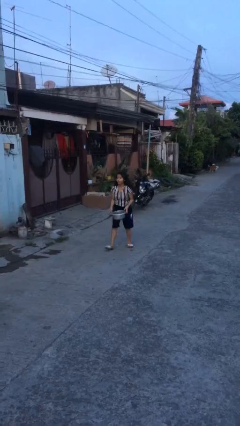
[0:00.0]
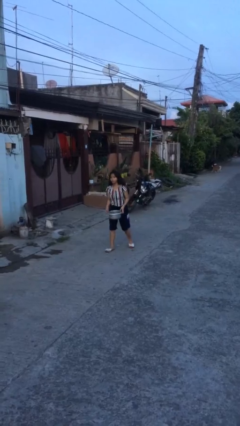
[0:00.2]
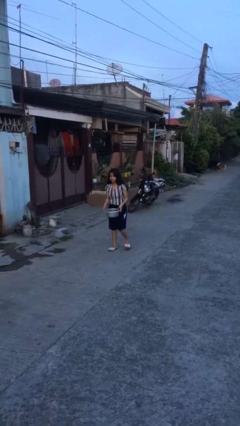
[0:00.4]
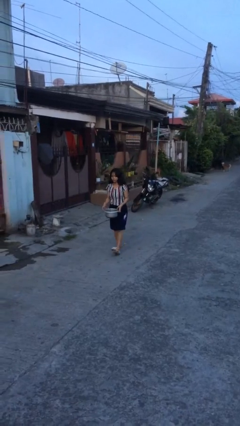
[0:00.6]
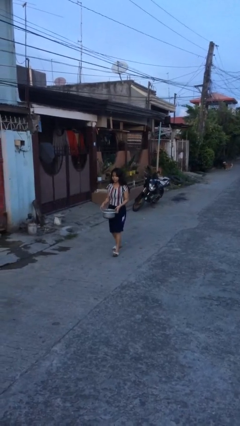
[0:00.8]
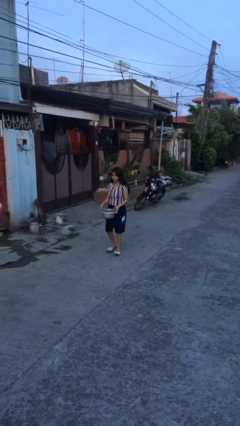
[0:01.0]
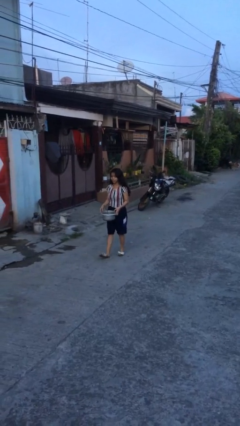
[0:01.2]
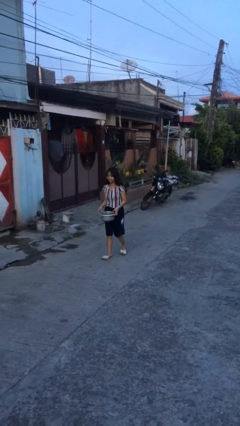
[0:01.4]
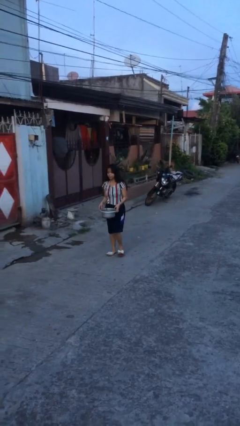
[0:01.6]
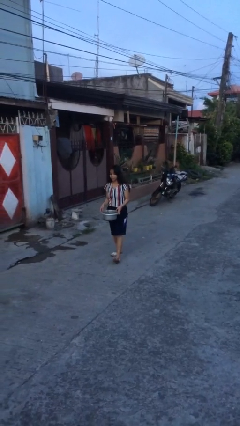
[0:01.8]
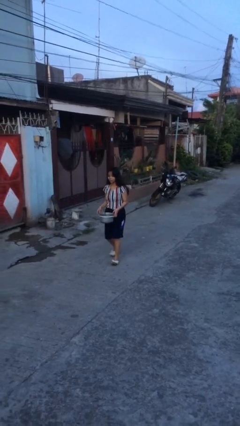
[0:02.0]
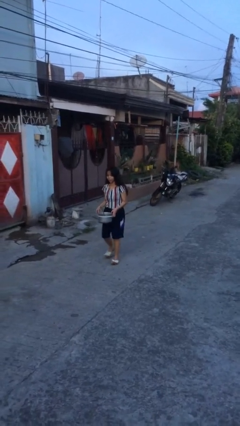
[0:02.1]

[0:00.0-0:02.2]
person carries heavy object

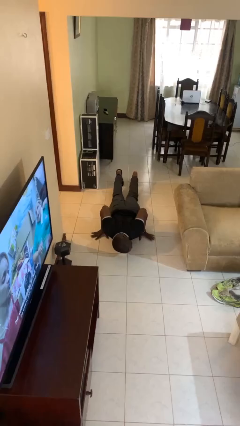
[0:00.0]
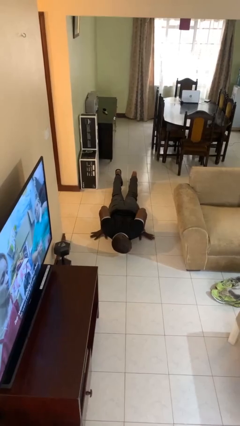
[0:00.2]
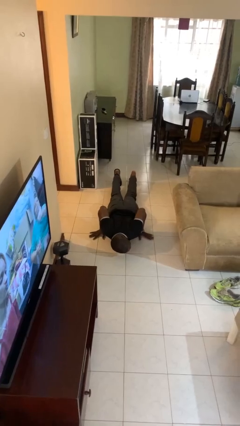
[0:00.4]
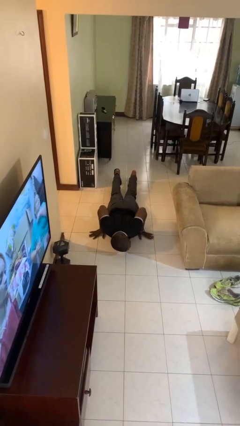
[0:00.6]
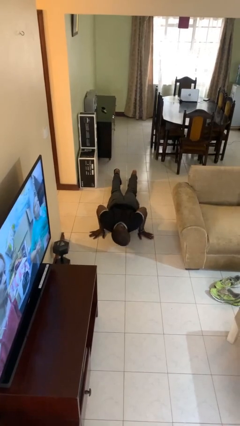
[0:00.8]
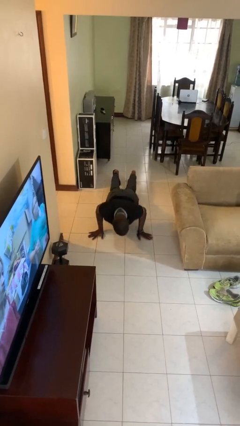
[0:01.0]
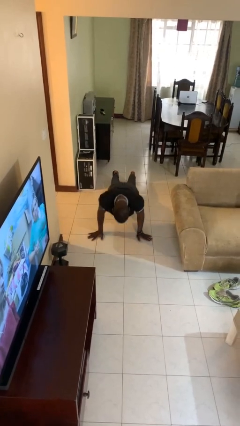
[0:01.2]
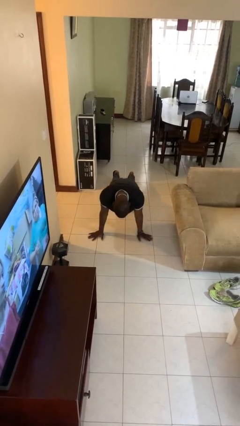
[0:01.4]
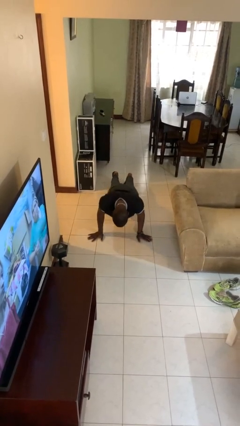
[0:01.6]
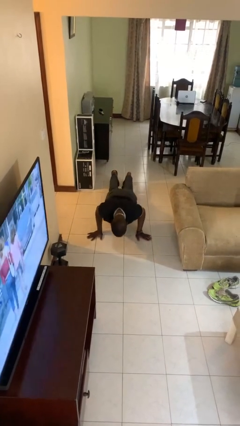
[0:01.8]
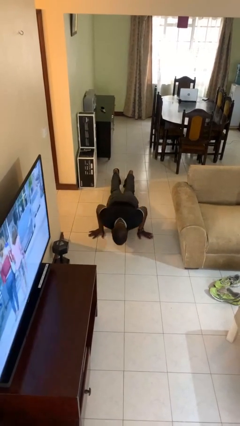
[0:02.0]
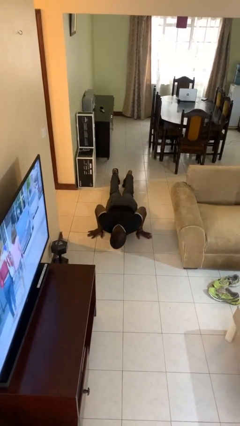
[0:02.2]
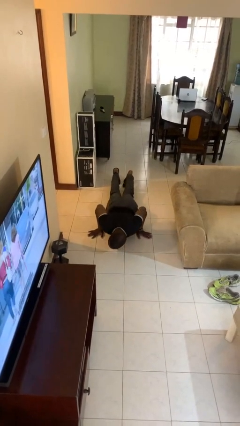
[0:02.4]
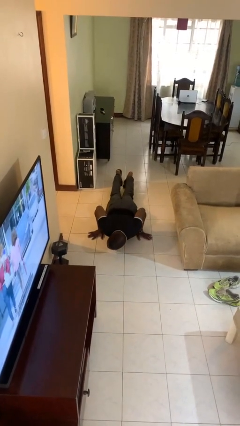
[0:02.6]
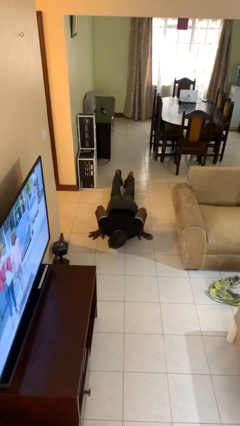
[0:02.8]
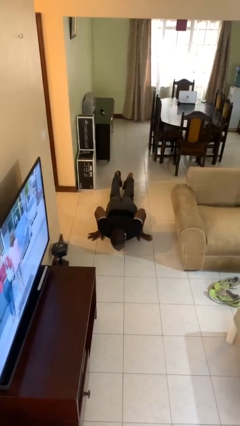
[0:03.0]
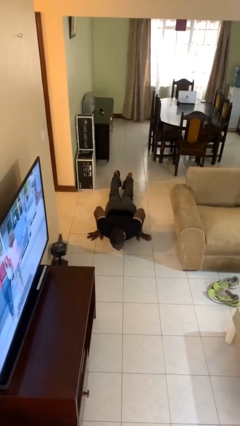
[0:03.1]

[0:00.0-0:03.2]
person exercises with pushup

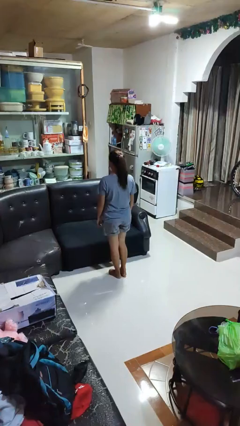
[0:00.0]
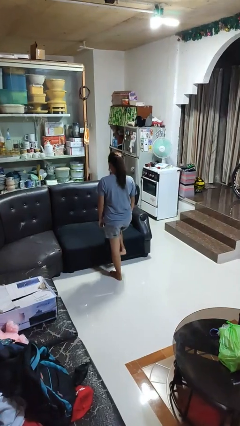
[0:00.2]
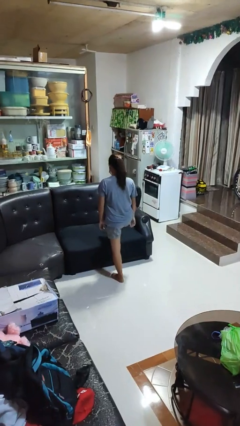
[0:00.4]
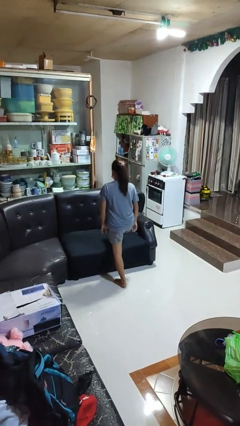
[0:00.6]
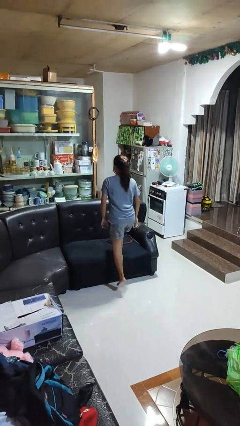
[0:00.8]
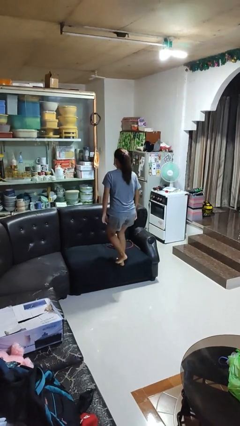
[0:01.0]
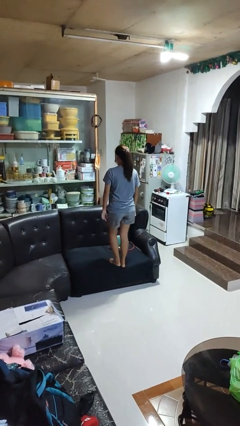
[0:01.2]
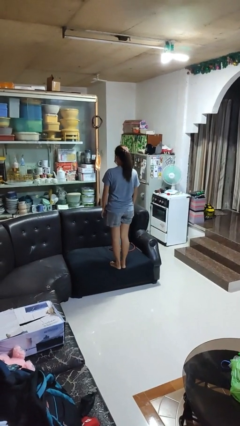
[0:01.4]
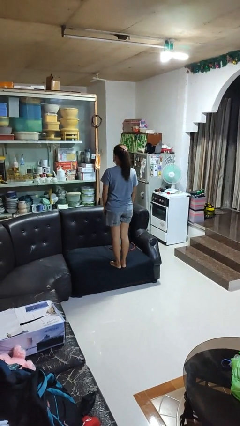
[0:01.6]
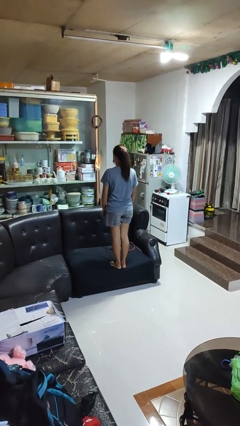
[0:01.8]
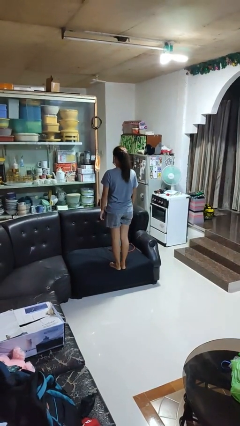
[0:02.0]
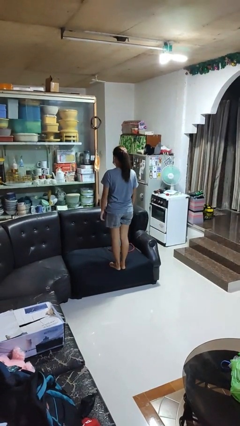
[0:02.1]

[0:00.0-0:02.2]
person climbs on couch

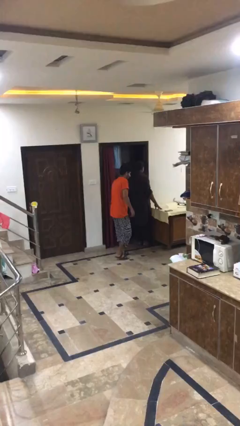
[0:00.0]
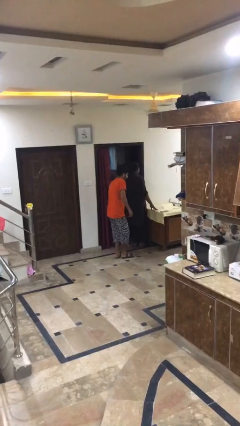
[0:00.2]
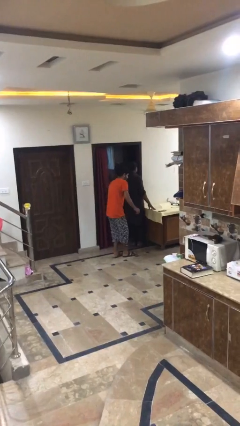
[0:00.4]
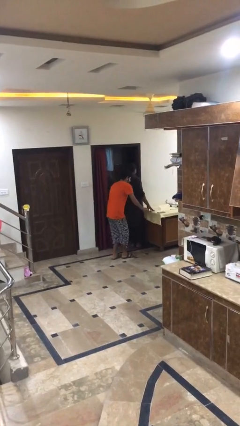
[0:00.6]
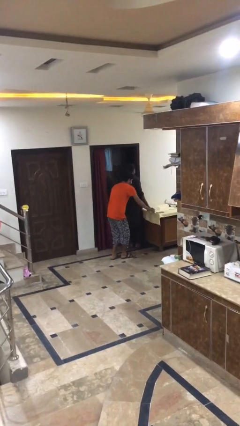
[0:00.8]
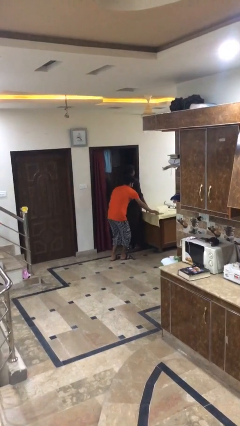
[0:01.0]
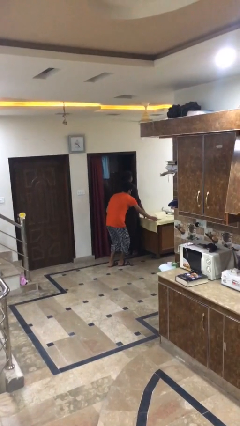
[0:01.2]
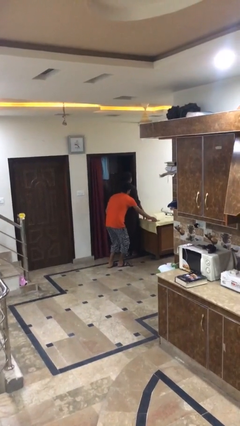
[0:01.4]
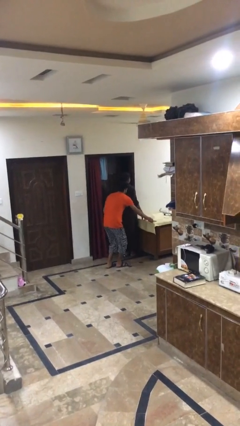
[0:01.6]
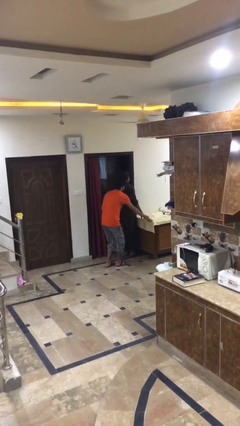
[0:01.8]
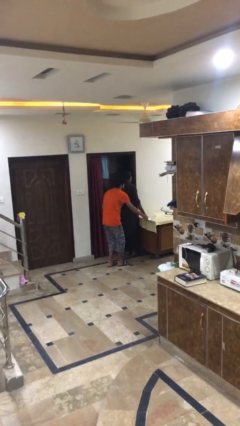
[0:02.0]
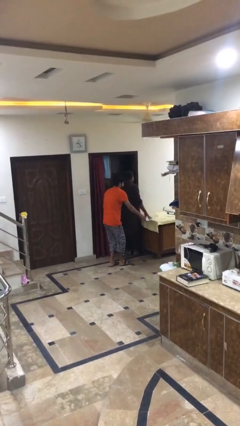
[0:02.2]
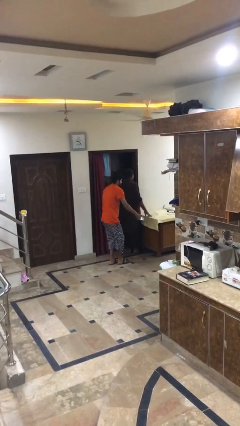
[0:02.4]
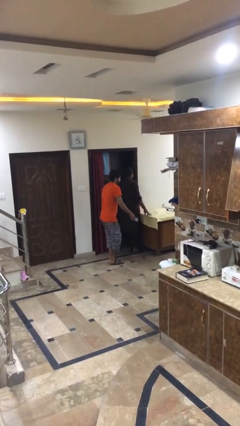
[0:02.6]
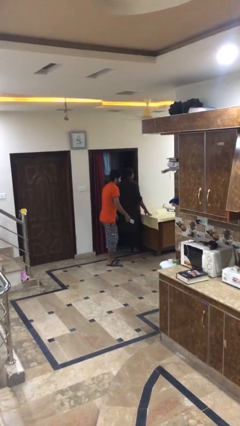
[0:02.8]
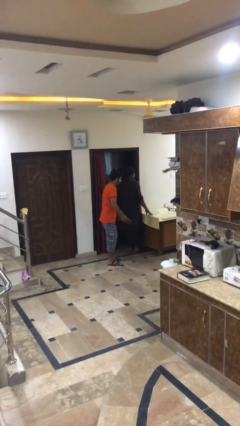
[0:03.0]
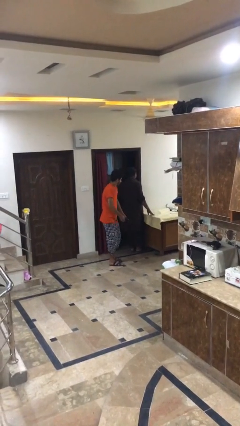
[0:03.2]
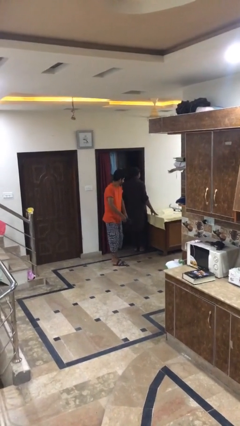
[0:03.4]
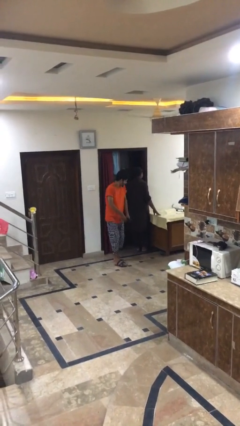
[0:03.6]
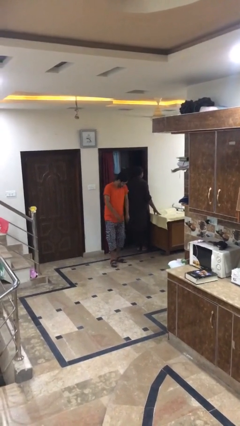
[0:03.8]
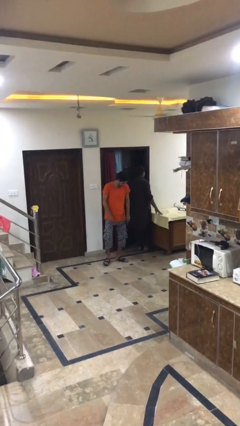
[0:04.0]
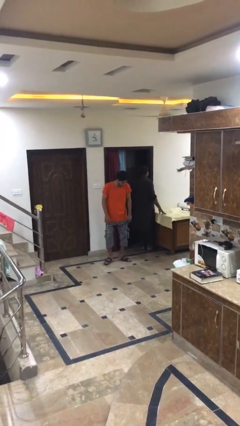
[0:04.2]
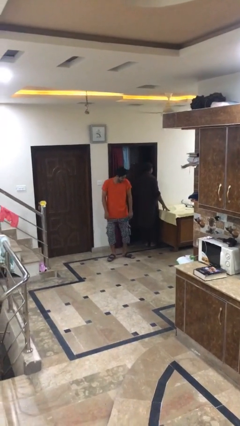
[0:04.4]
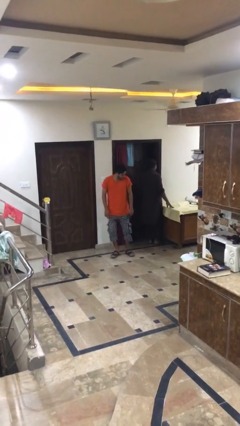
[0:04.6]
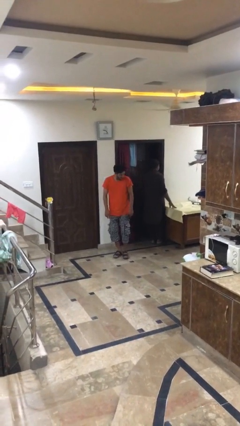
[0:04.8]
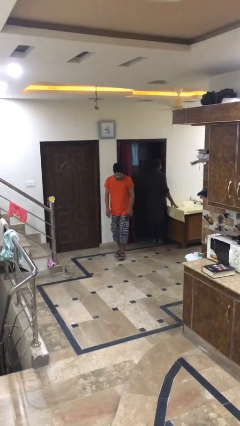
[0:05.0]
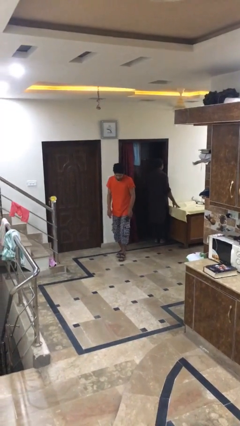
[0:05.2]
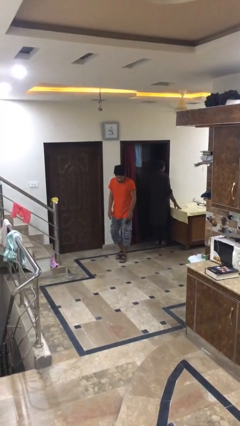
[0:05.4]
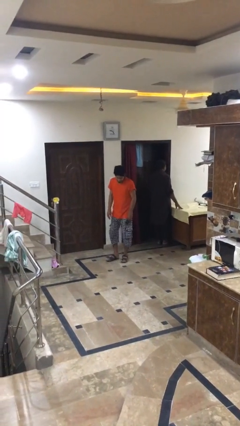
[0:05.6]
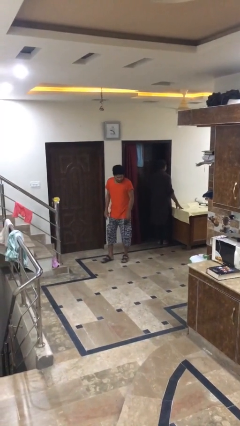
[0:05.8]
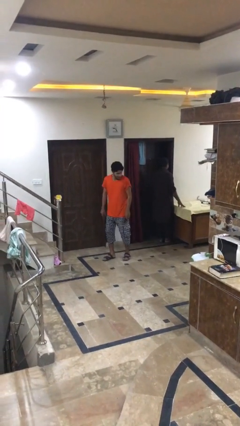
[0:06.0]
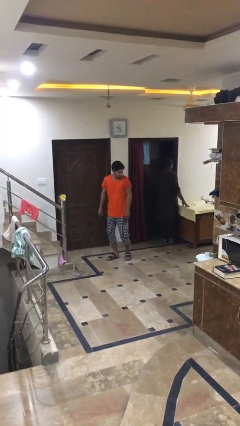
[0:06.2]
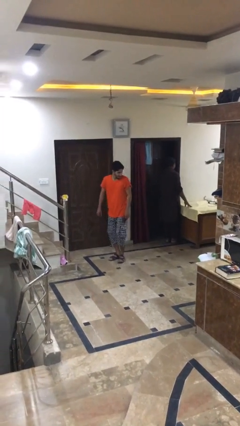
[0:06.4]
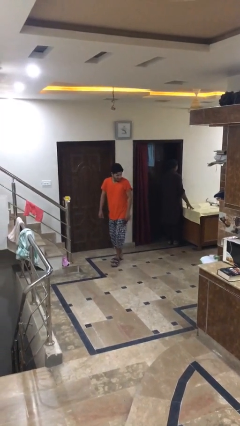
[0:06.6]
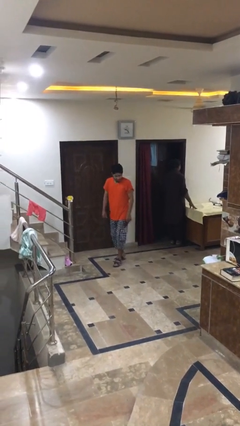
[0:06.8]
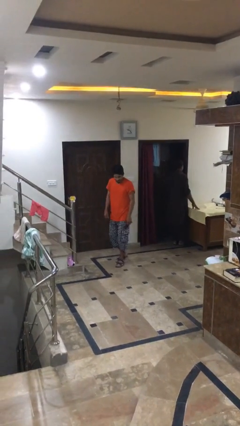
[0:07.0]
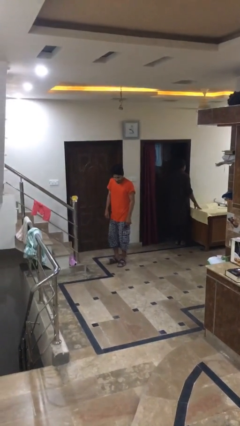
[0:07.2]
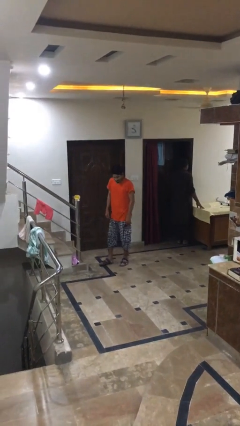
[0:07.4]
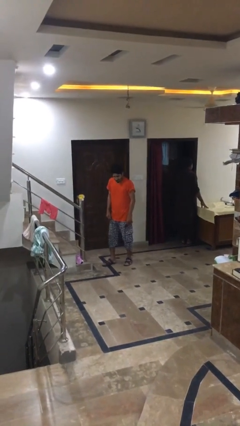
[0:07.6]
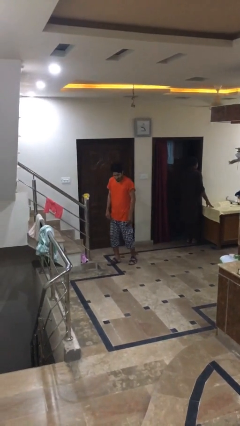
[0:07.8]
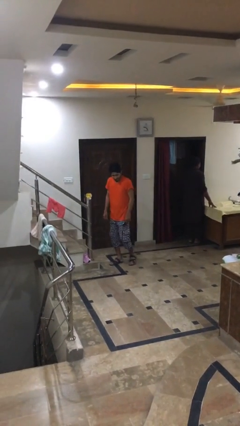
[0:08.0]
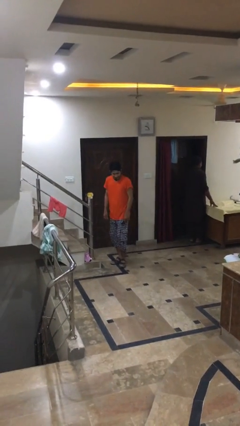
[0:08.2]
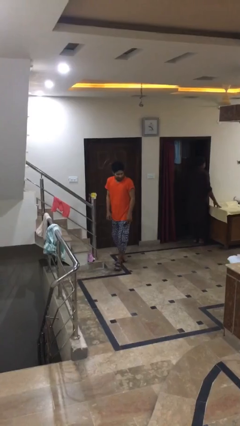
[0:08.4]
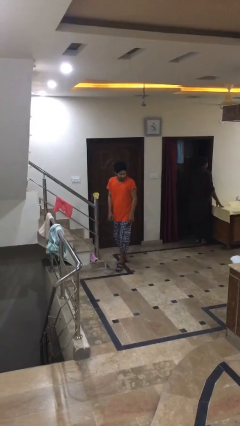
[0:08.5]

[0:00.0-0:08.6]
person steals object from person

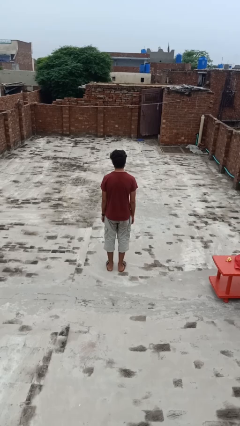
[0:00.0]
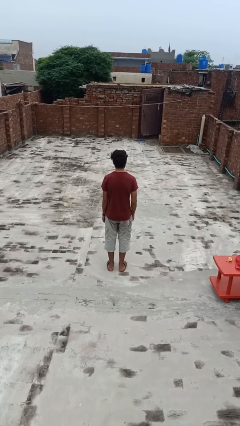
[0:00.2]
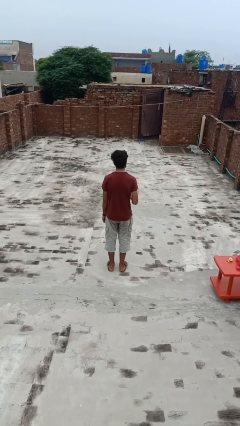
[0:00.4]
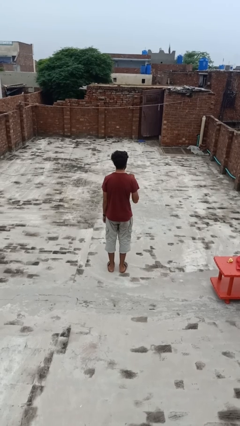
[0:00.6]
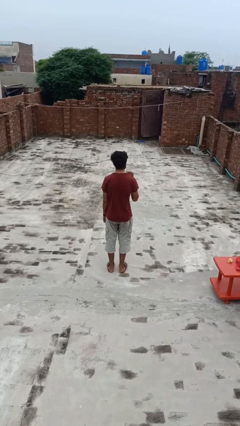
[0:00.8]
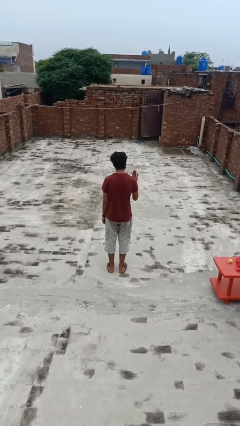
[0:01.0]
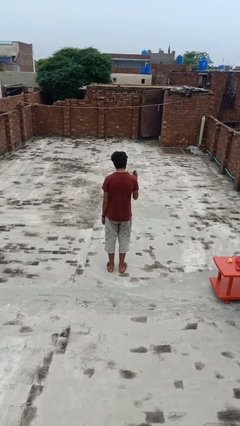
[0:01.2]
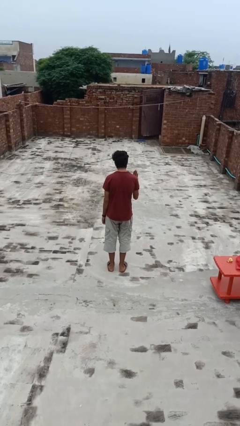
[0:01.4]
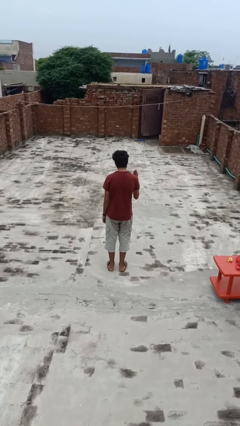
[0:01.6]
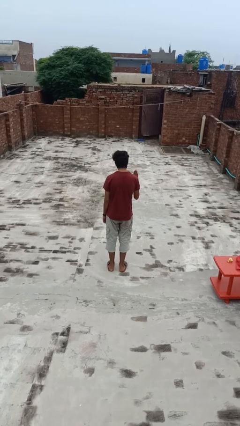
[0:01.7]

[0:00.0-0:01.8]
person gestures stop
